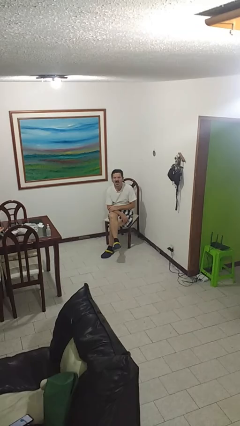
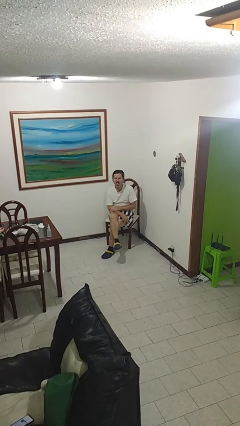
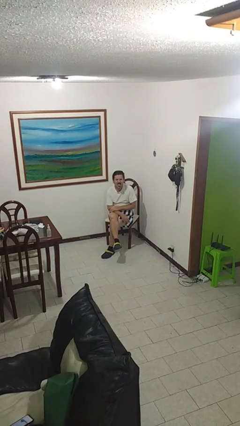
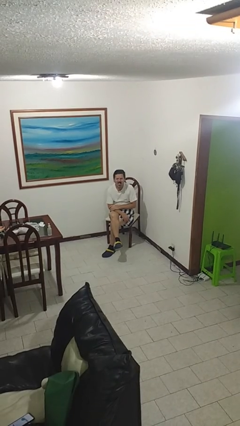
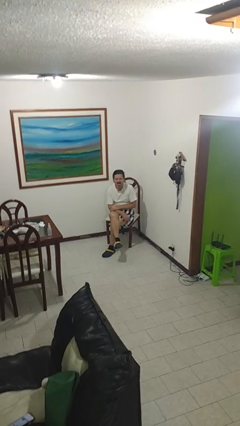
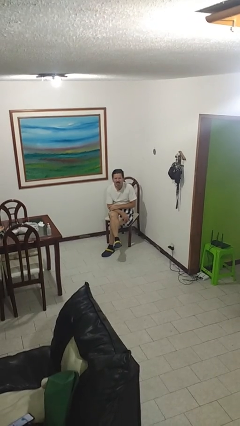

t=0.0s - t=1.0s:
person sticks out tongue

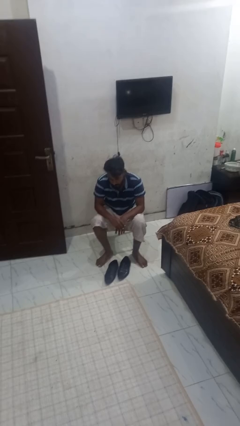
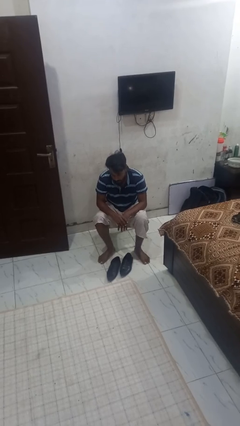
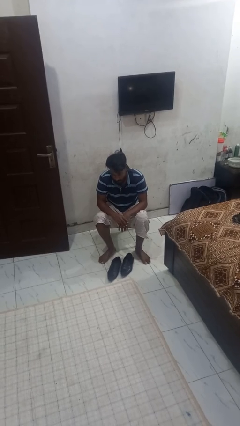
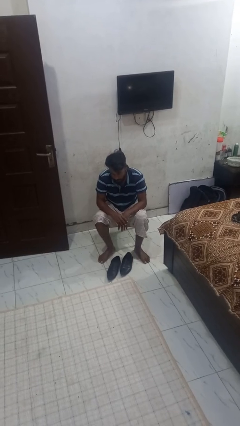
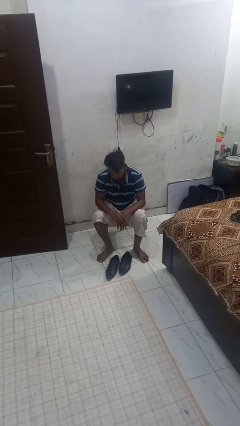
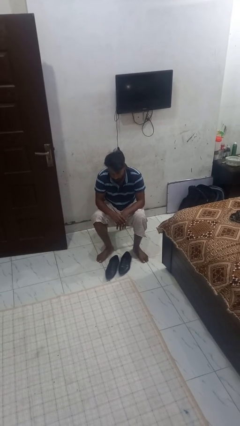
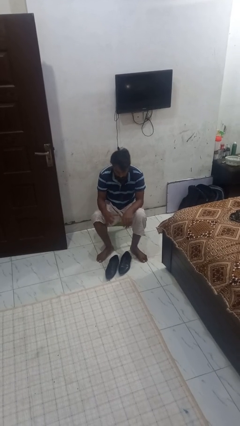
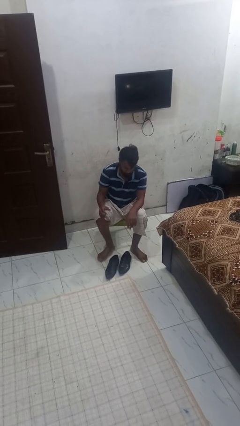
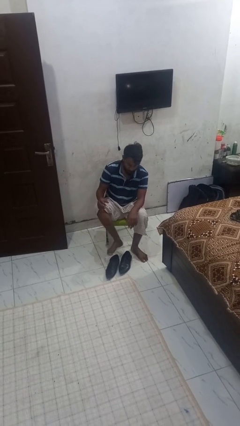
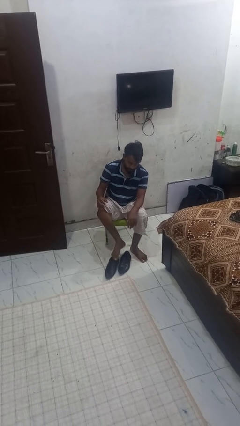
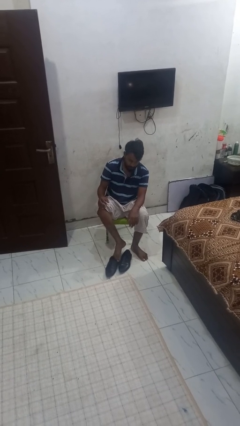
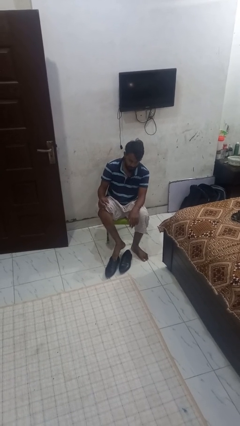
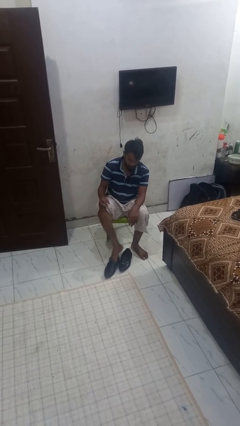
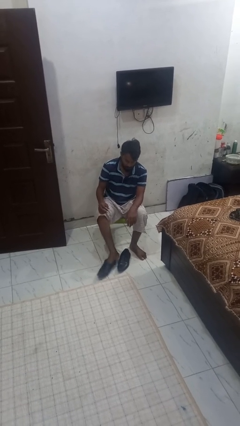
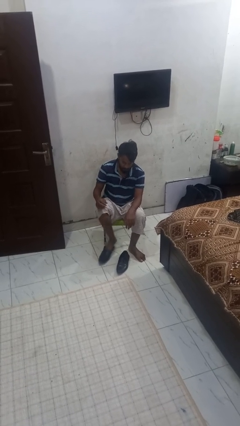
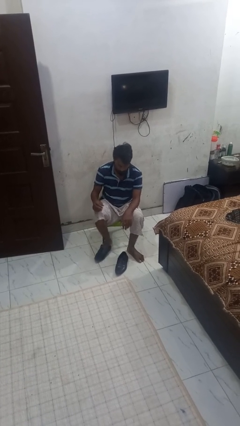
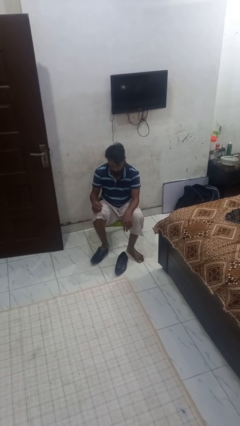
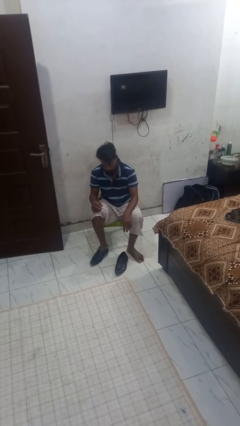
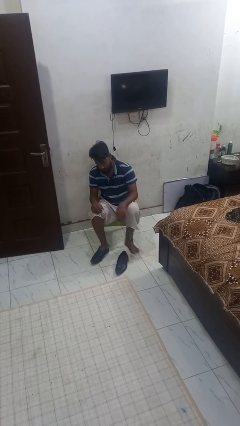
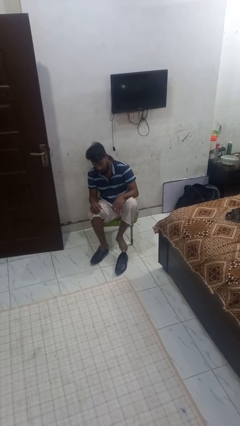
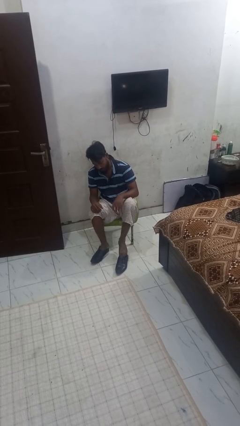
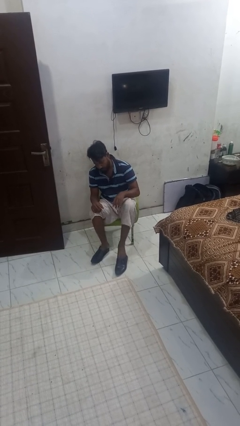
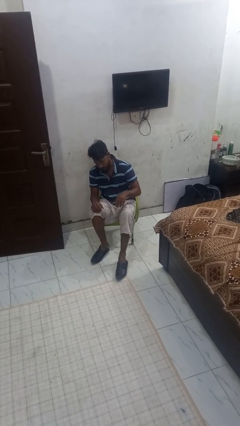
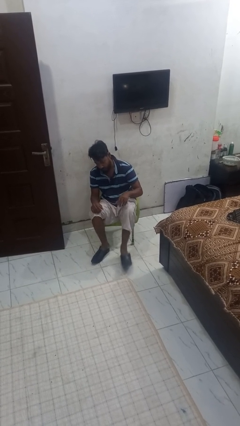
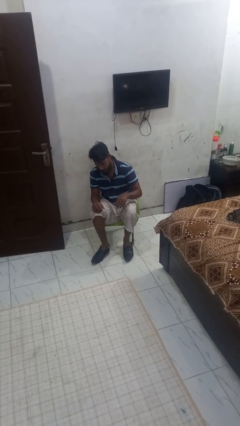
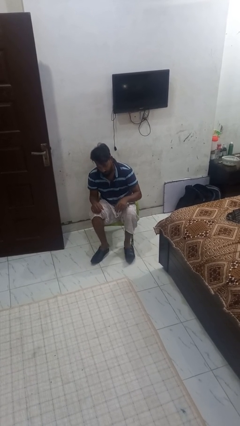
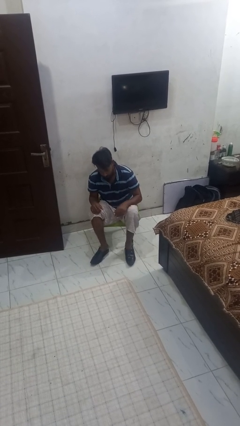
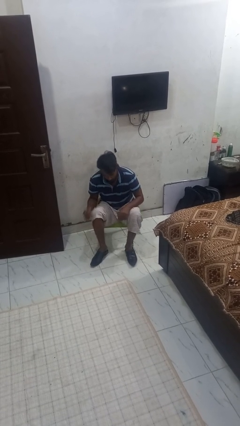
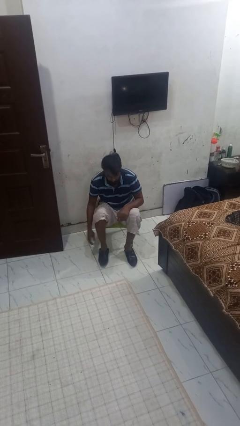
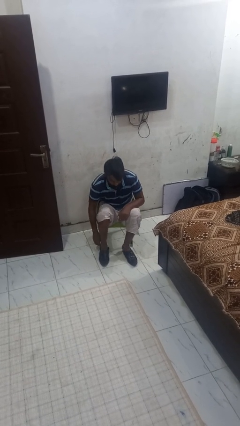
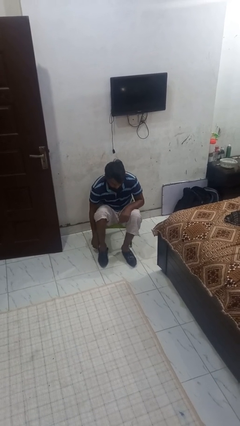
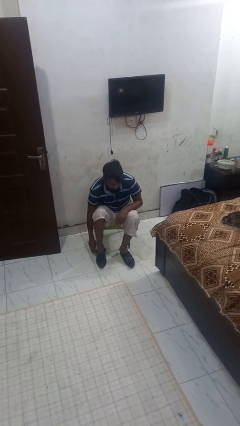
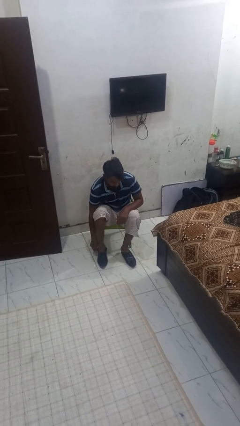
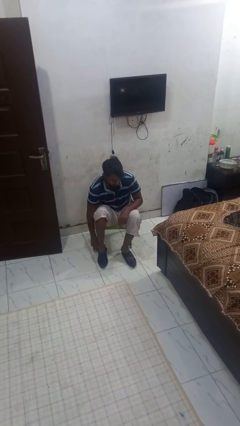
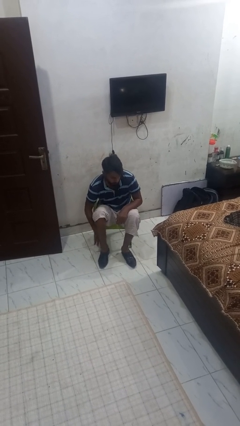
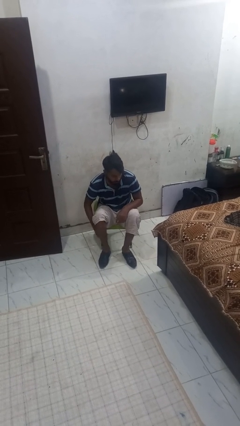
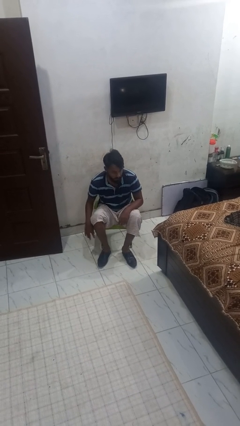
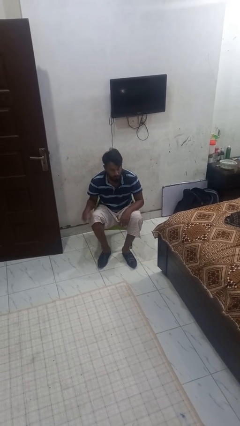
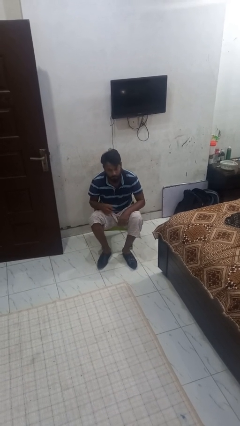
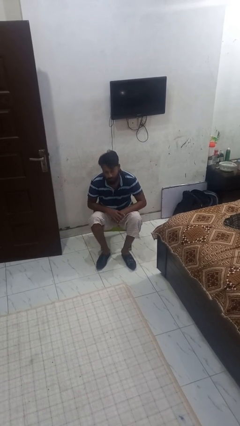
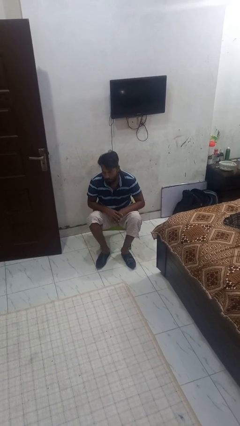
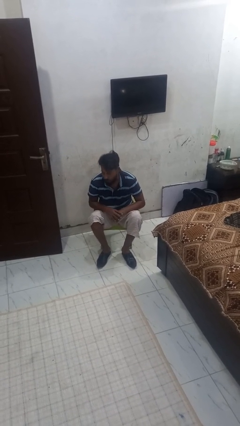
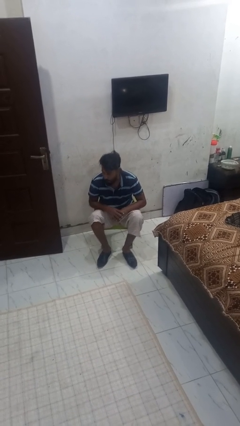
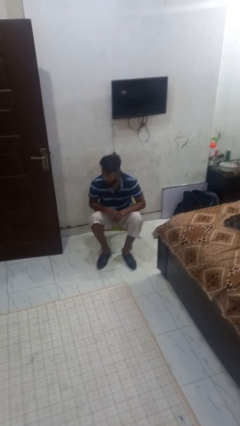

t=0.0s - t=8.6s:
person puts on shoes

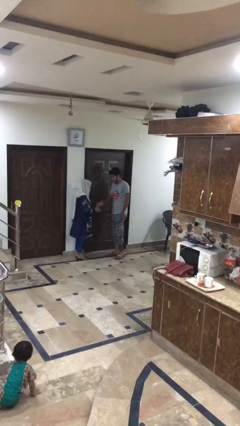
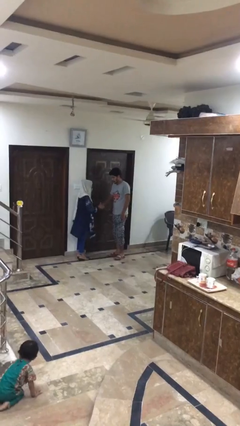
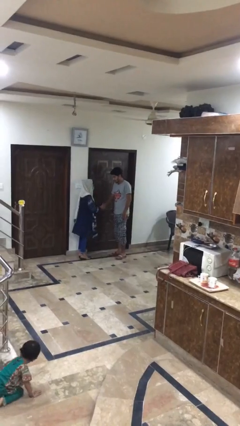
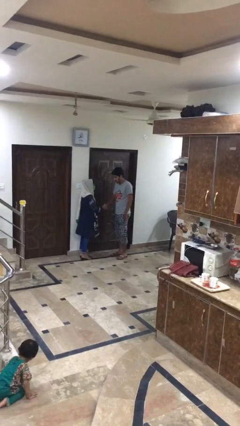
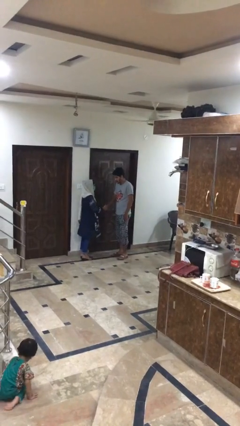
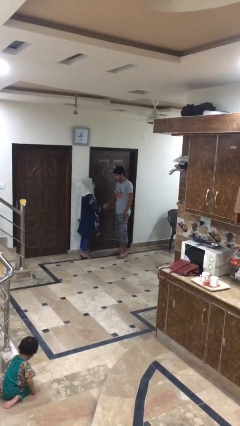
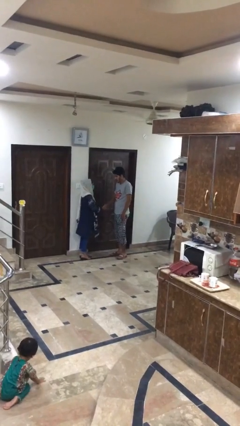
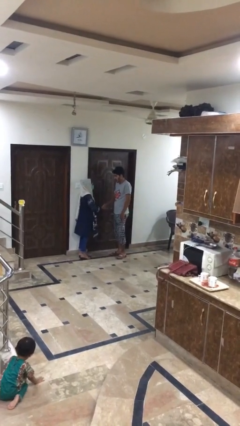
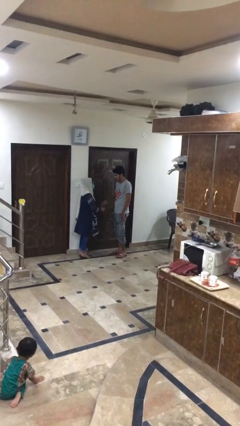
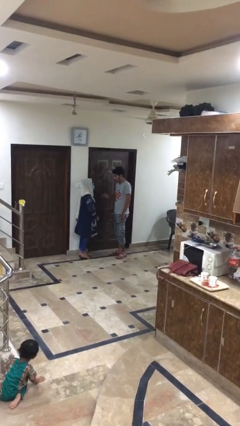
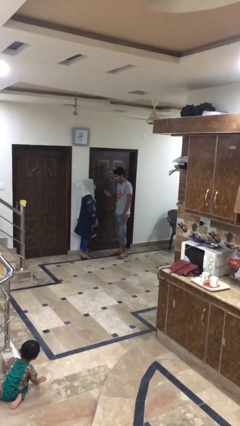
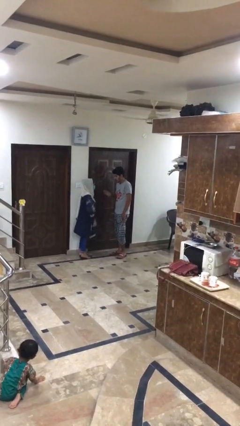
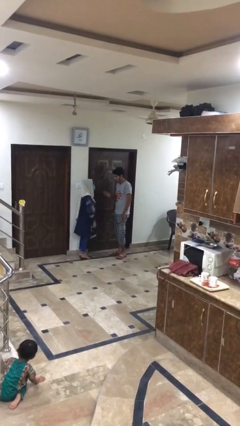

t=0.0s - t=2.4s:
person shakes hand

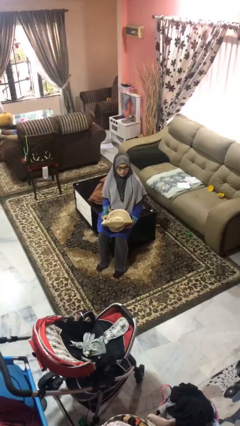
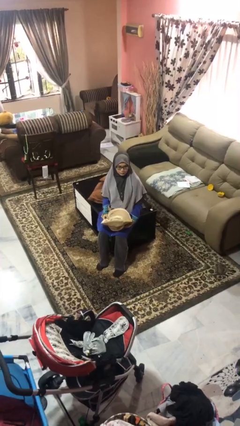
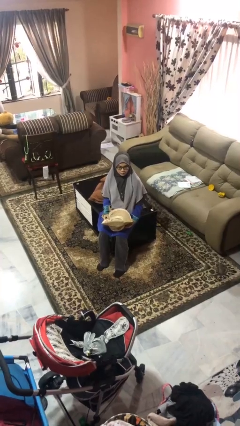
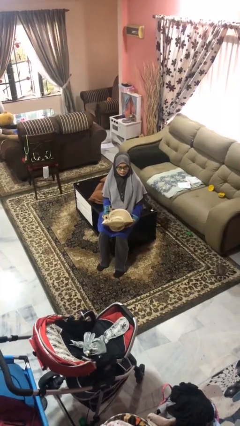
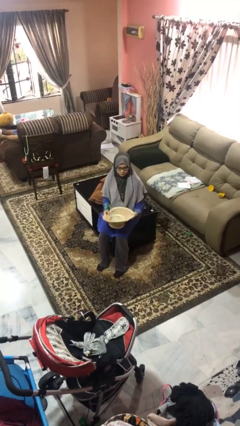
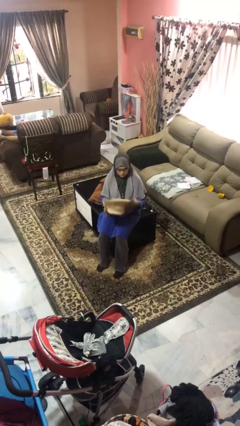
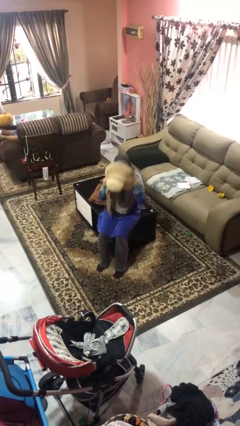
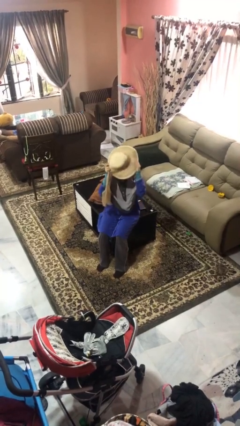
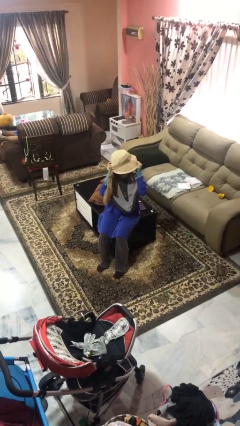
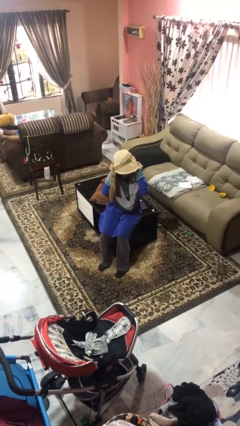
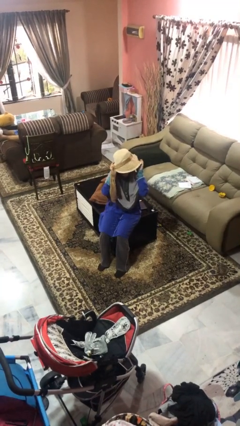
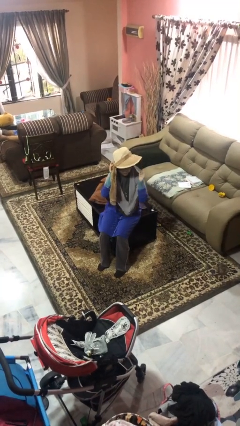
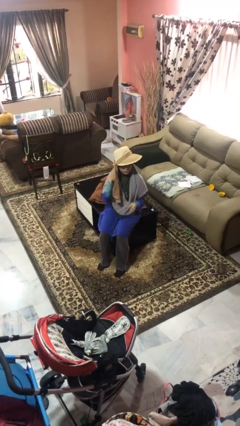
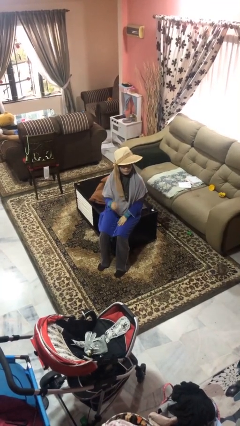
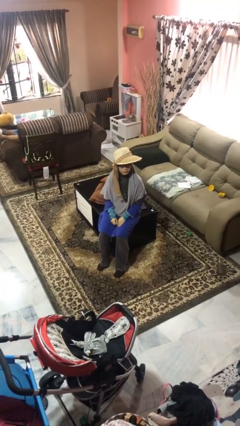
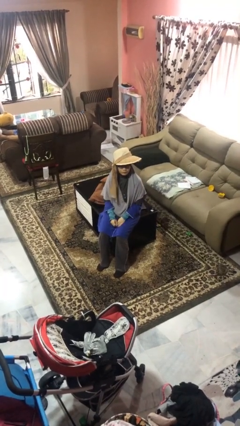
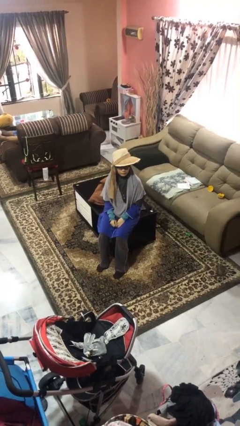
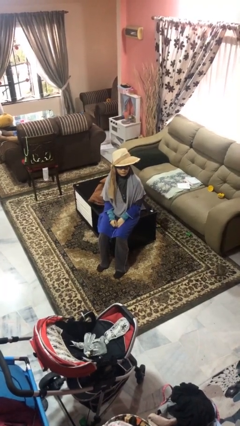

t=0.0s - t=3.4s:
person puts on hat

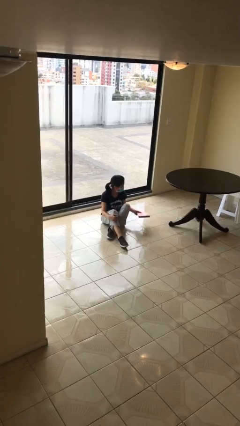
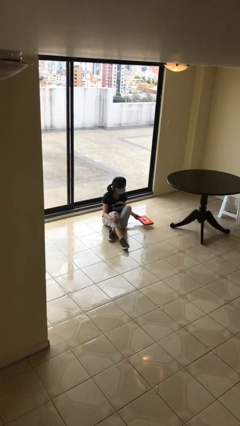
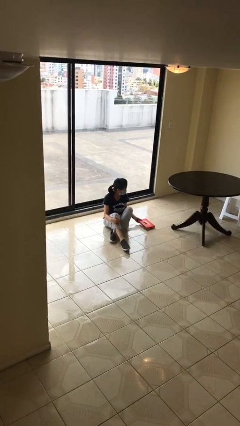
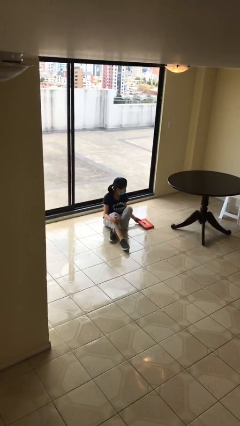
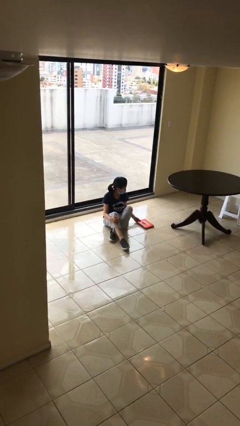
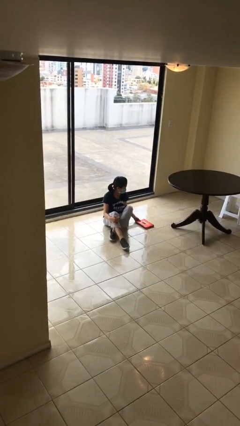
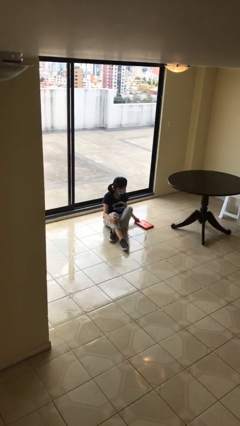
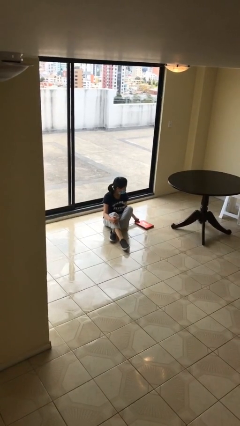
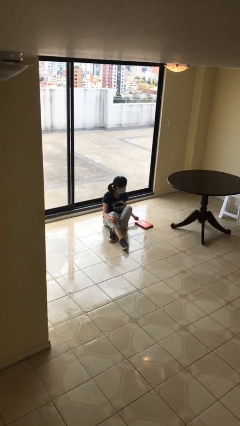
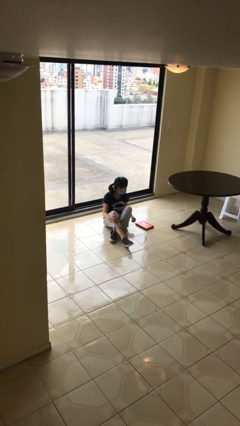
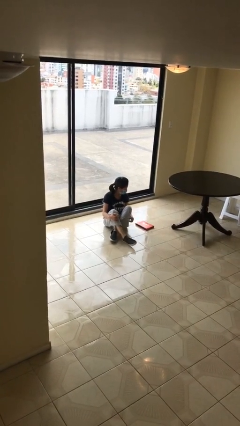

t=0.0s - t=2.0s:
person puts down object on floor

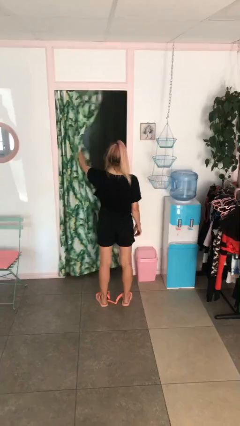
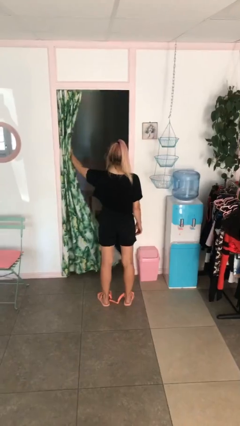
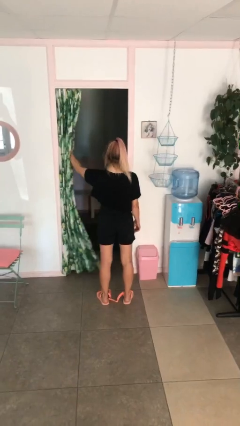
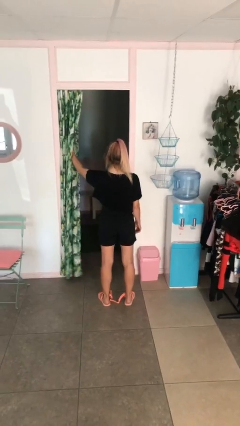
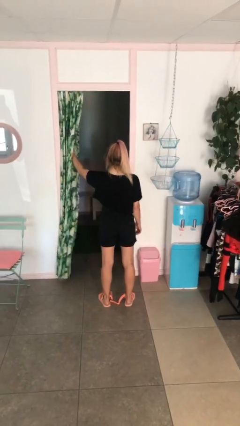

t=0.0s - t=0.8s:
person opens sliding door
